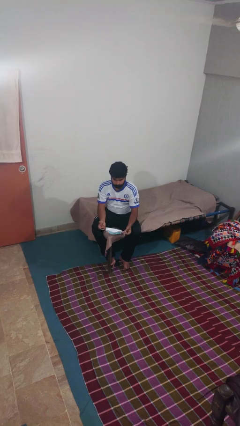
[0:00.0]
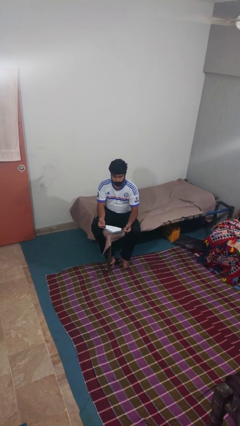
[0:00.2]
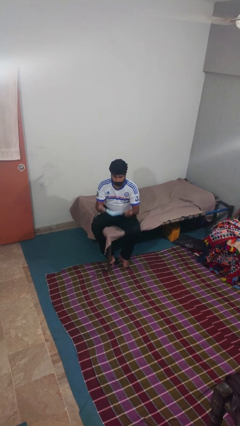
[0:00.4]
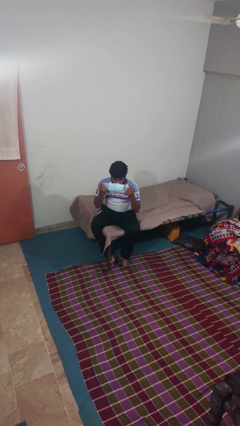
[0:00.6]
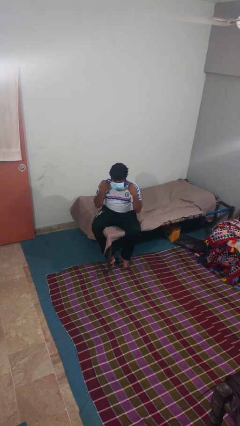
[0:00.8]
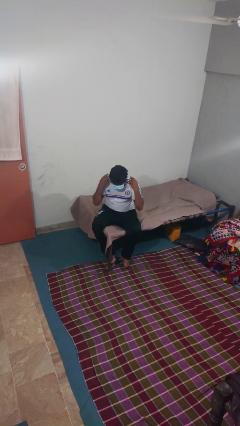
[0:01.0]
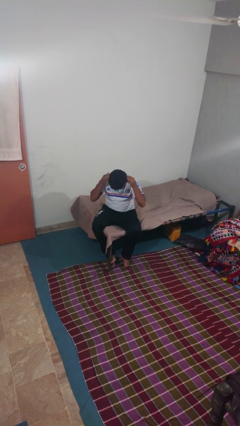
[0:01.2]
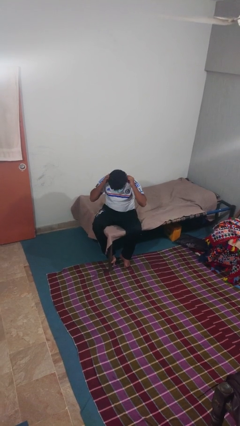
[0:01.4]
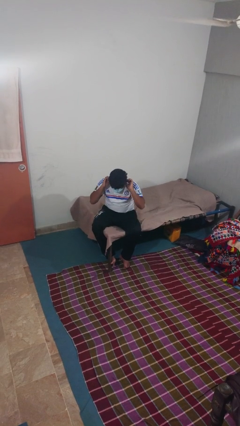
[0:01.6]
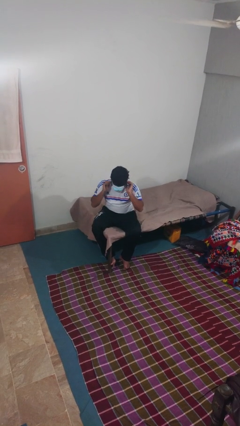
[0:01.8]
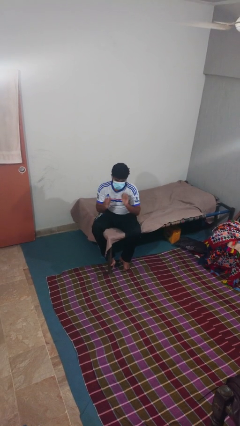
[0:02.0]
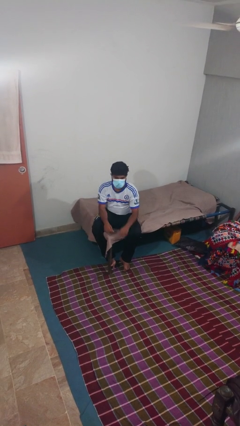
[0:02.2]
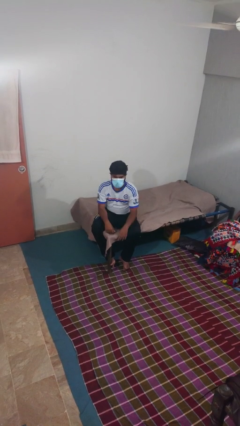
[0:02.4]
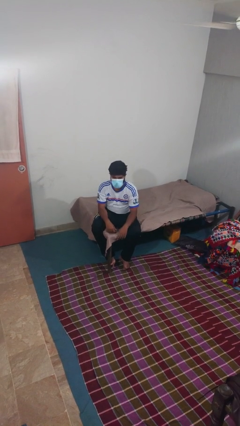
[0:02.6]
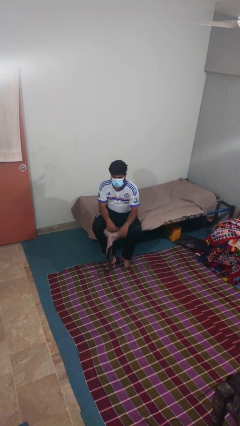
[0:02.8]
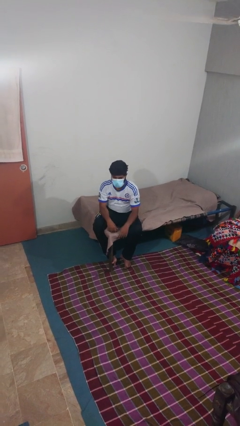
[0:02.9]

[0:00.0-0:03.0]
person puts on facemask

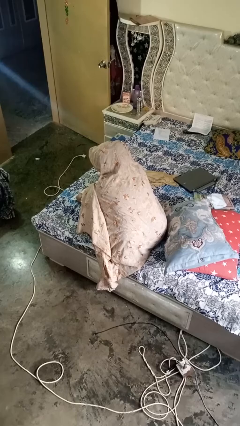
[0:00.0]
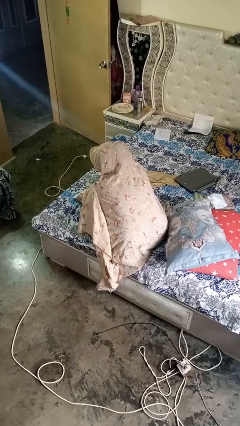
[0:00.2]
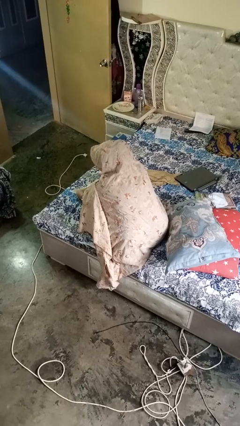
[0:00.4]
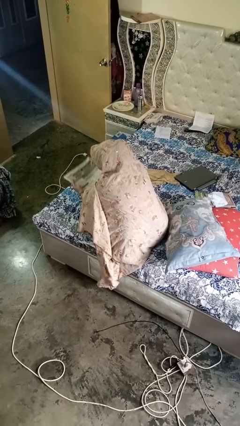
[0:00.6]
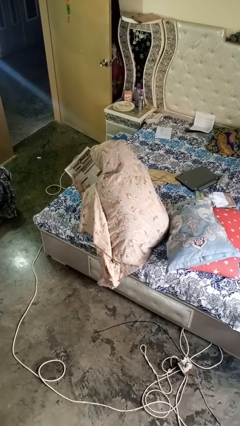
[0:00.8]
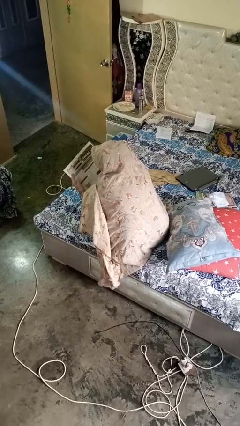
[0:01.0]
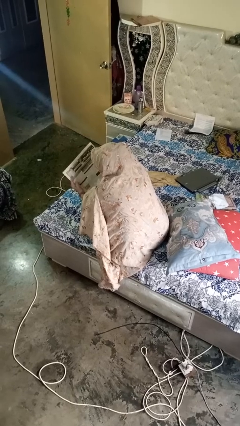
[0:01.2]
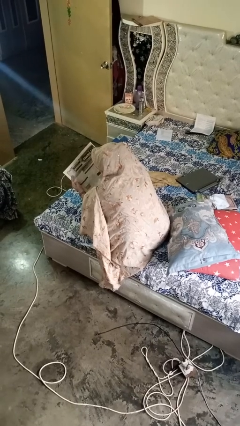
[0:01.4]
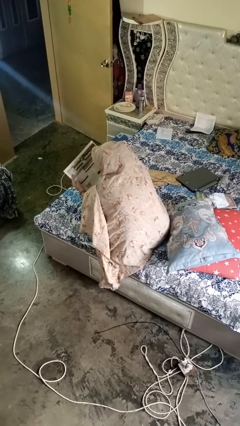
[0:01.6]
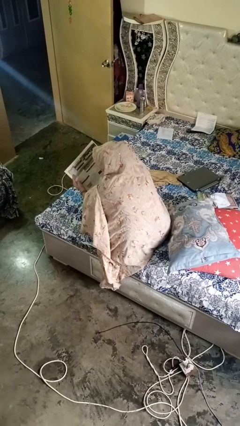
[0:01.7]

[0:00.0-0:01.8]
person reads newspaper

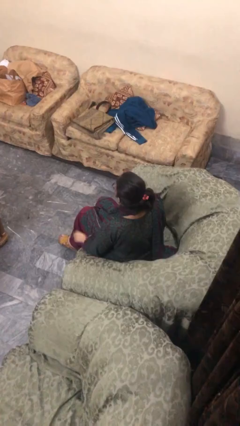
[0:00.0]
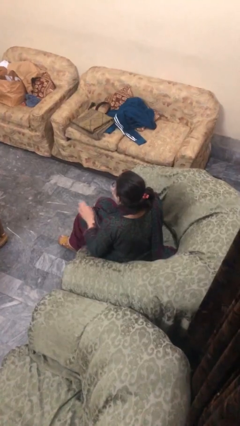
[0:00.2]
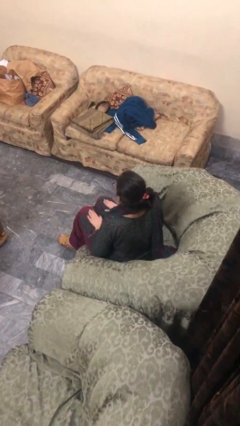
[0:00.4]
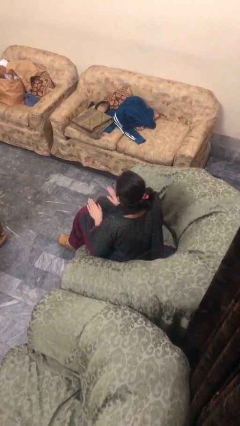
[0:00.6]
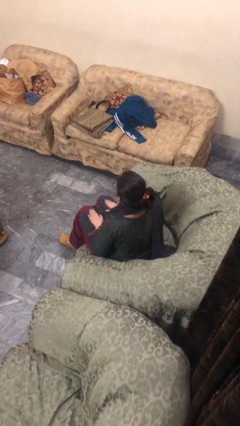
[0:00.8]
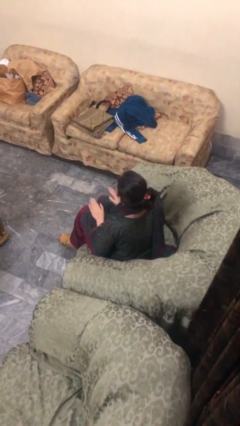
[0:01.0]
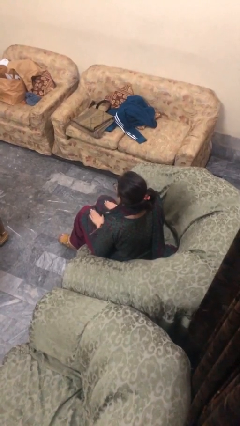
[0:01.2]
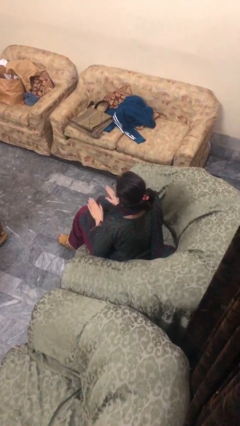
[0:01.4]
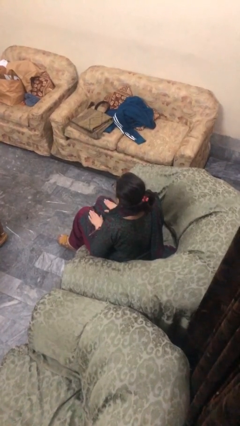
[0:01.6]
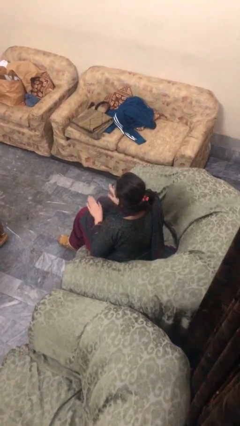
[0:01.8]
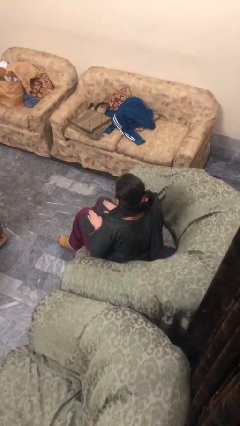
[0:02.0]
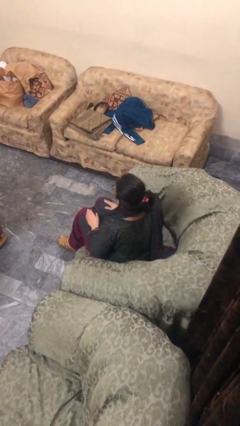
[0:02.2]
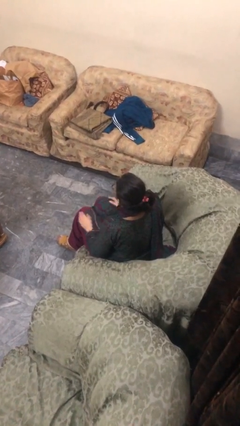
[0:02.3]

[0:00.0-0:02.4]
person slaps hands on thighs

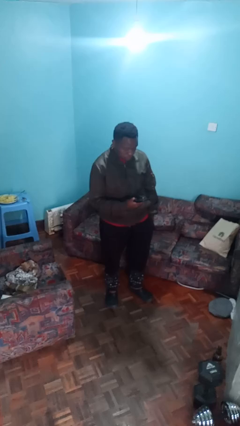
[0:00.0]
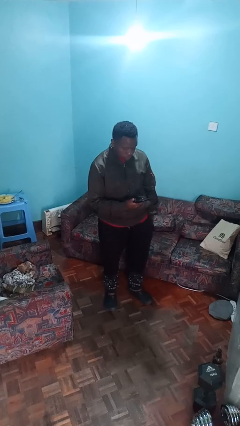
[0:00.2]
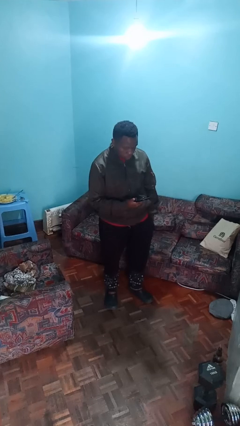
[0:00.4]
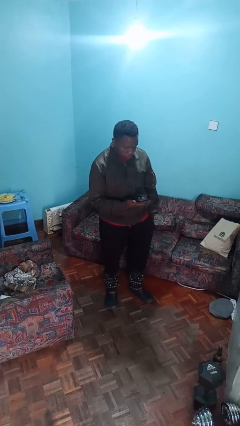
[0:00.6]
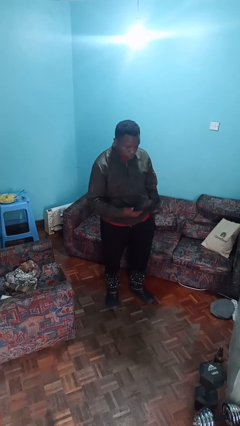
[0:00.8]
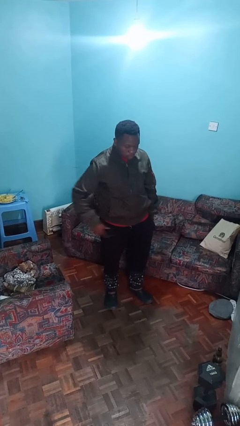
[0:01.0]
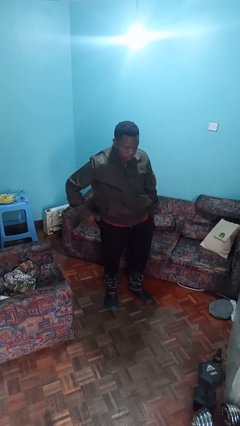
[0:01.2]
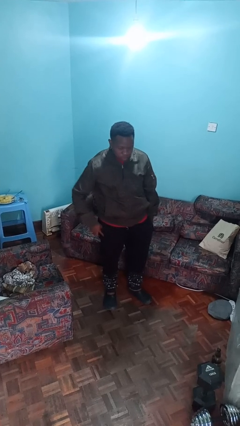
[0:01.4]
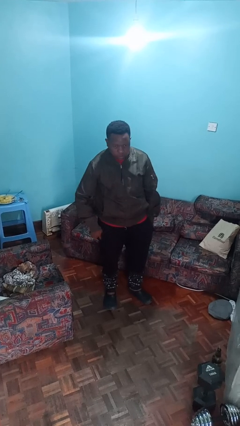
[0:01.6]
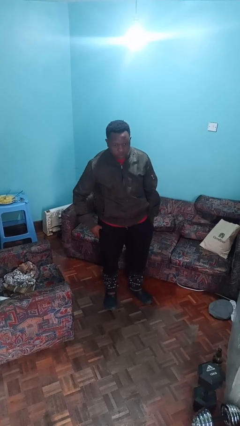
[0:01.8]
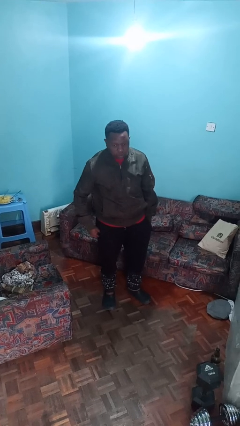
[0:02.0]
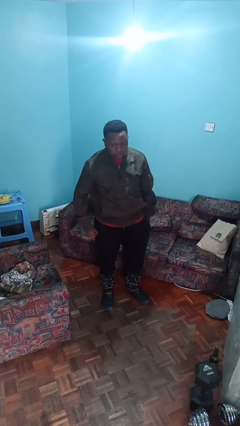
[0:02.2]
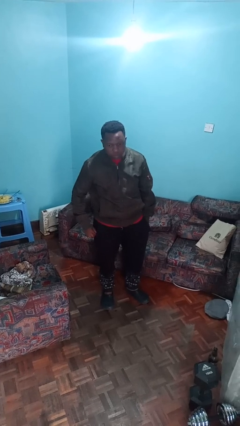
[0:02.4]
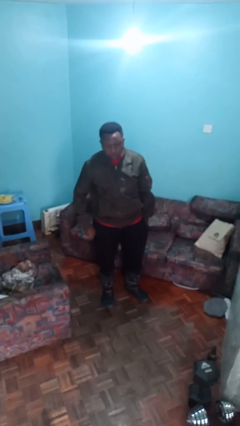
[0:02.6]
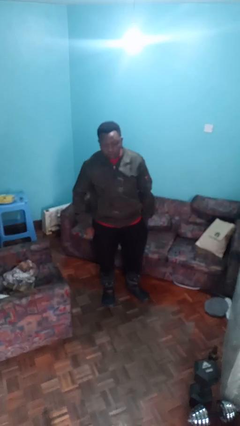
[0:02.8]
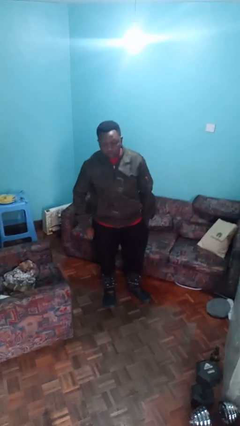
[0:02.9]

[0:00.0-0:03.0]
person puts phone into pocket

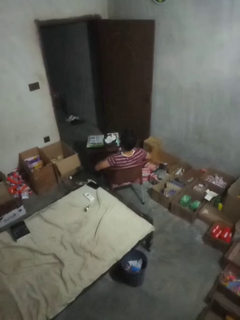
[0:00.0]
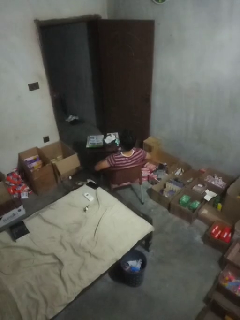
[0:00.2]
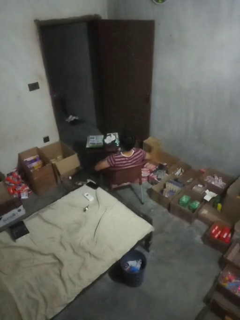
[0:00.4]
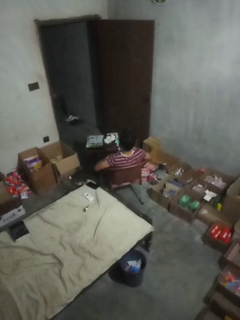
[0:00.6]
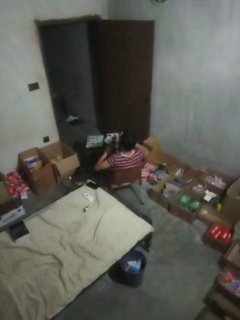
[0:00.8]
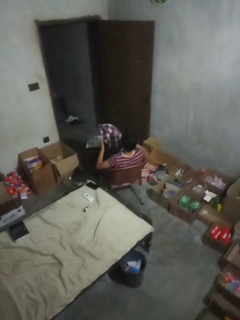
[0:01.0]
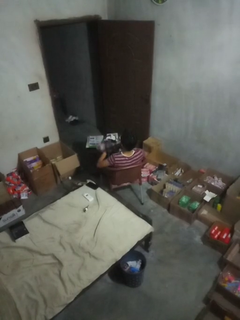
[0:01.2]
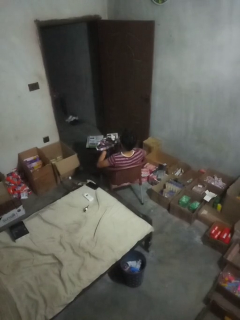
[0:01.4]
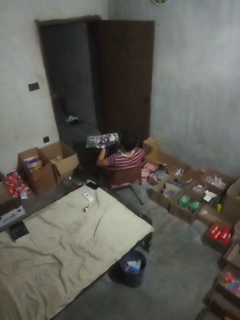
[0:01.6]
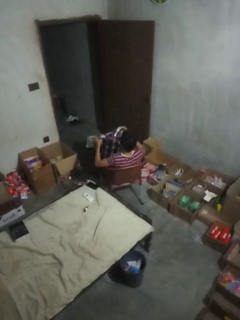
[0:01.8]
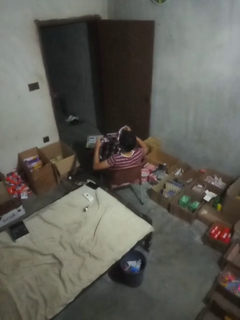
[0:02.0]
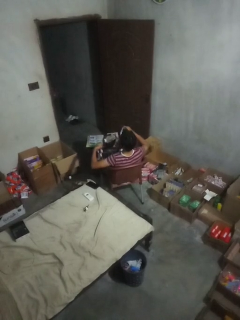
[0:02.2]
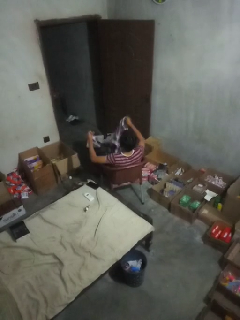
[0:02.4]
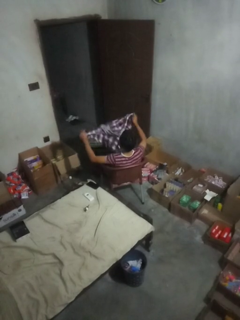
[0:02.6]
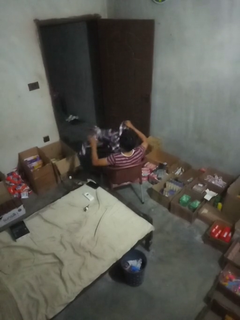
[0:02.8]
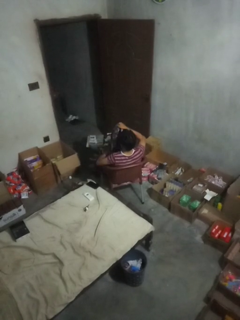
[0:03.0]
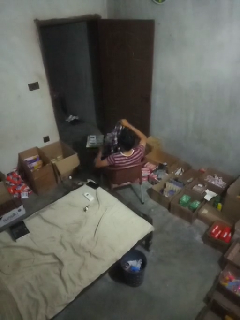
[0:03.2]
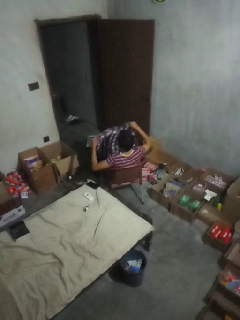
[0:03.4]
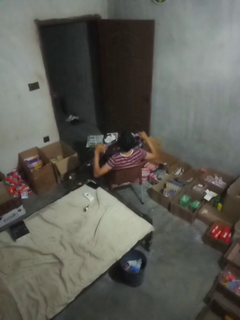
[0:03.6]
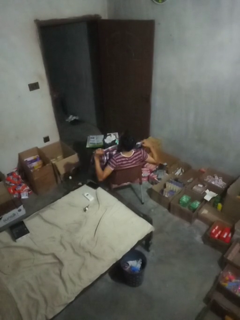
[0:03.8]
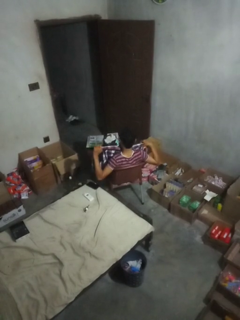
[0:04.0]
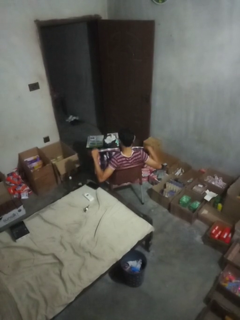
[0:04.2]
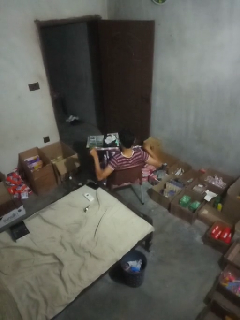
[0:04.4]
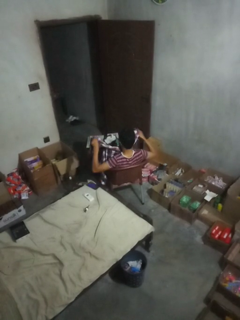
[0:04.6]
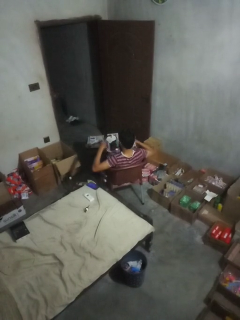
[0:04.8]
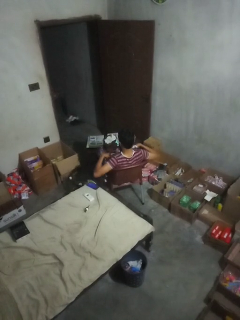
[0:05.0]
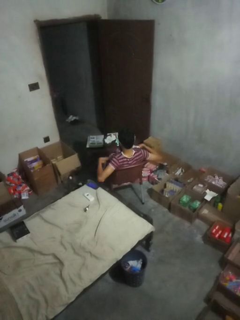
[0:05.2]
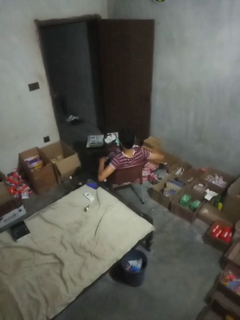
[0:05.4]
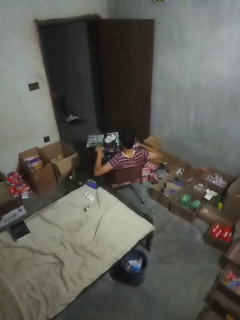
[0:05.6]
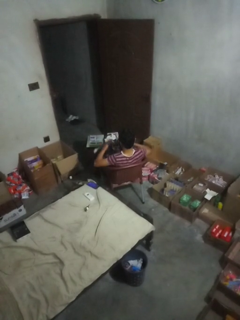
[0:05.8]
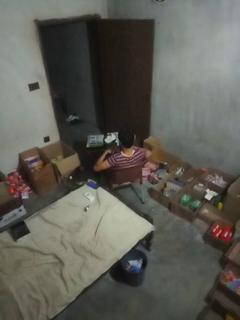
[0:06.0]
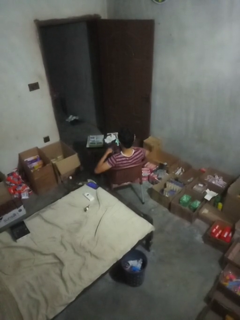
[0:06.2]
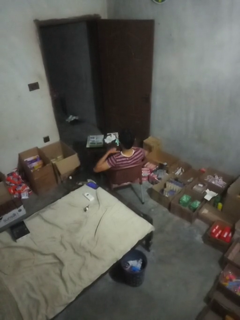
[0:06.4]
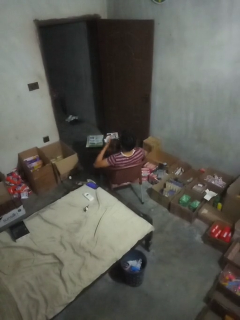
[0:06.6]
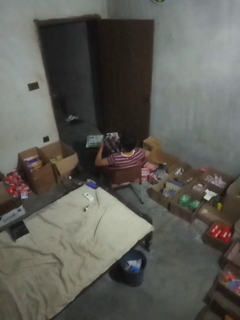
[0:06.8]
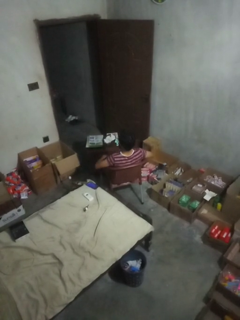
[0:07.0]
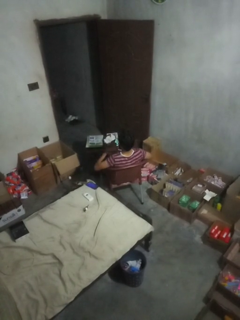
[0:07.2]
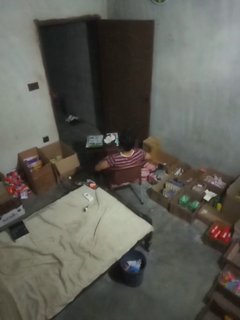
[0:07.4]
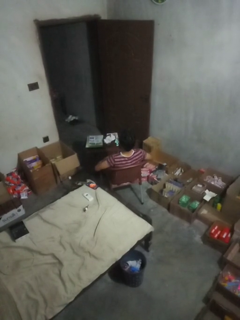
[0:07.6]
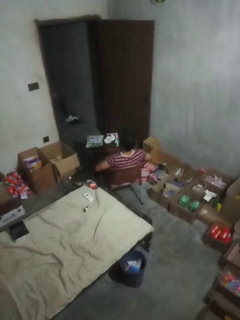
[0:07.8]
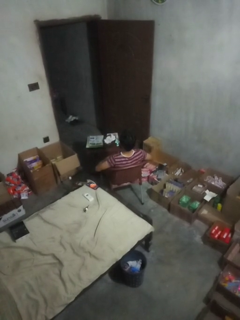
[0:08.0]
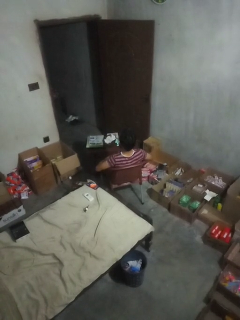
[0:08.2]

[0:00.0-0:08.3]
person folds shirt

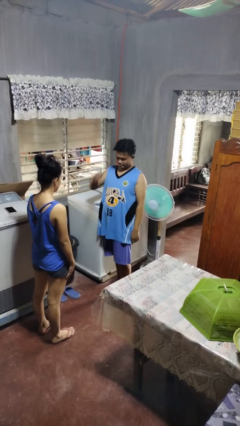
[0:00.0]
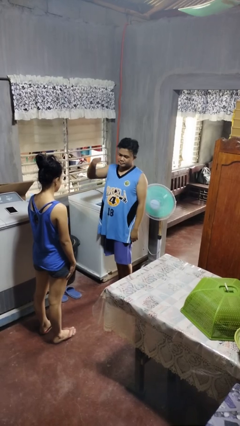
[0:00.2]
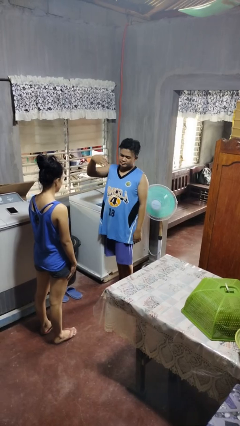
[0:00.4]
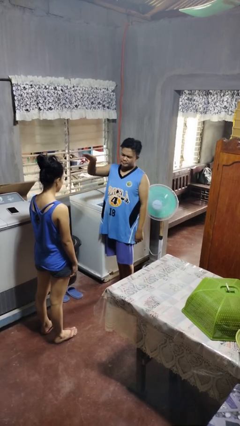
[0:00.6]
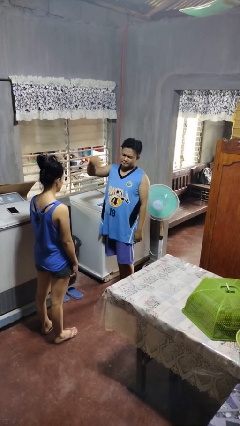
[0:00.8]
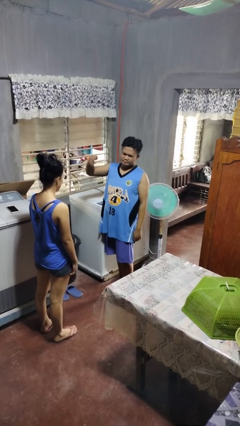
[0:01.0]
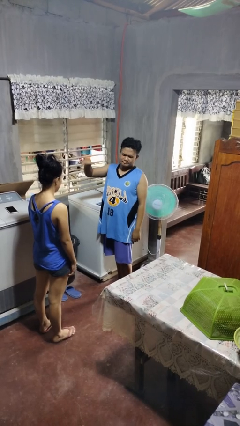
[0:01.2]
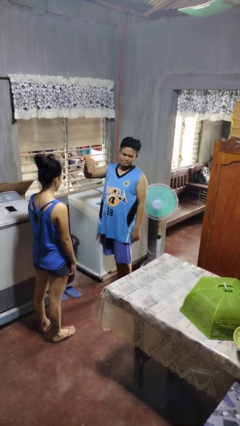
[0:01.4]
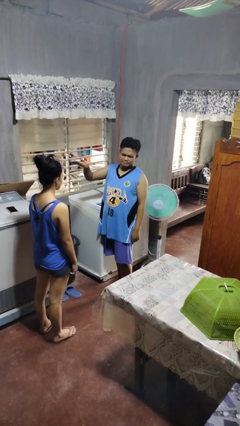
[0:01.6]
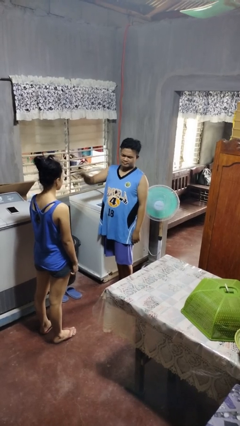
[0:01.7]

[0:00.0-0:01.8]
person shoves person
